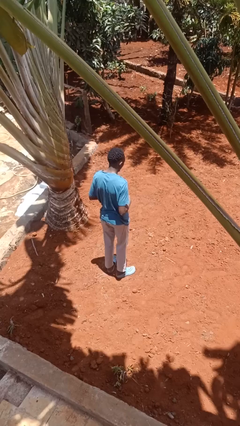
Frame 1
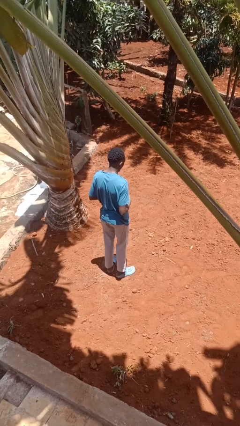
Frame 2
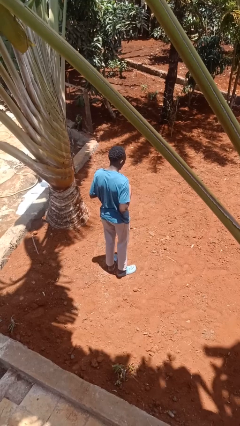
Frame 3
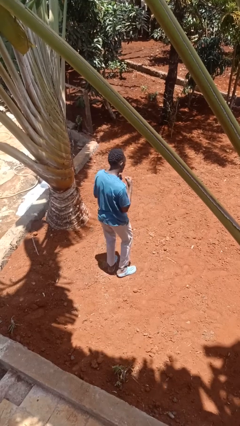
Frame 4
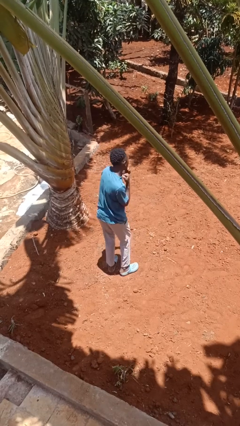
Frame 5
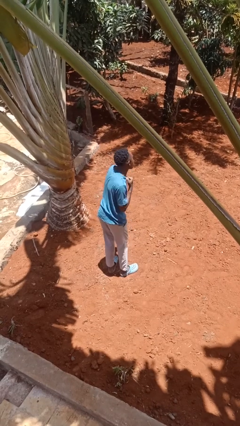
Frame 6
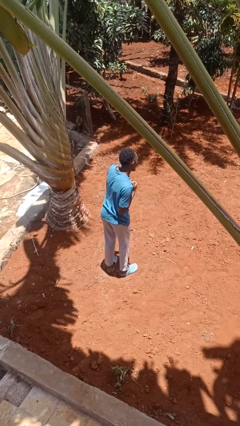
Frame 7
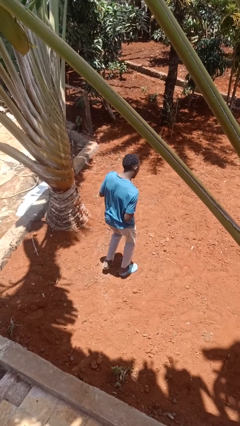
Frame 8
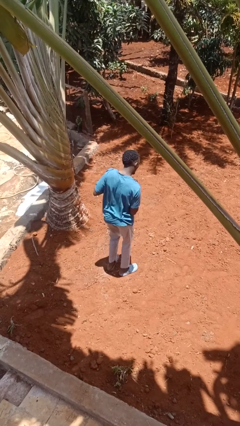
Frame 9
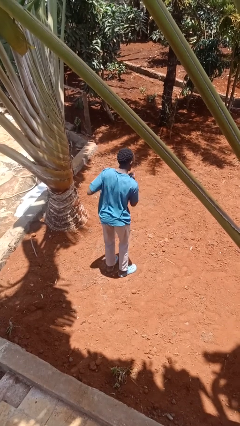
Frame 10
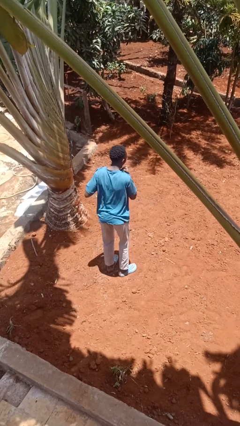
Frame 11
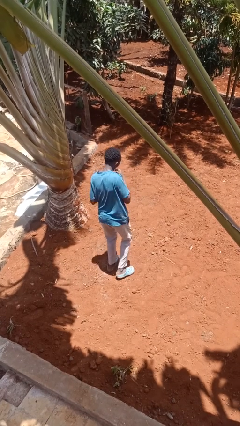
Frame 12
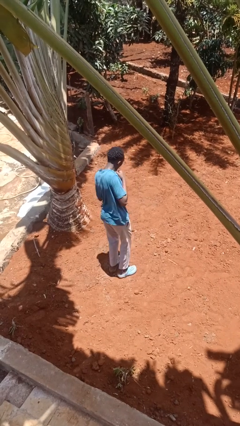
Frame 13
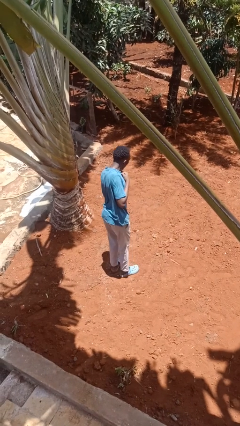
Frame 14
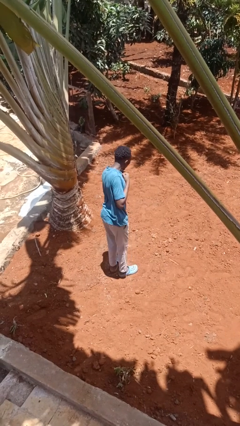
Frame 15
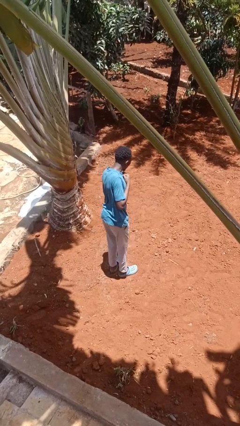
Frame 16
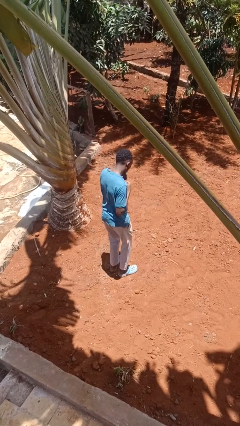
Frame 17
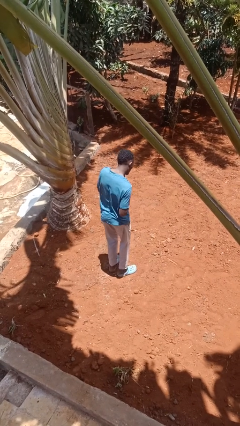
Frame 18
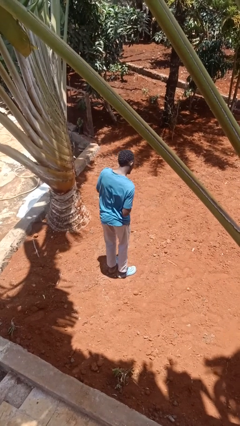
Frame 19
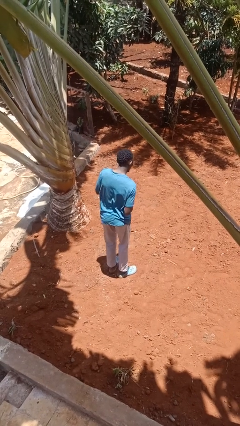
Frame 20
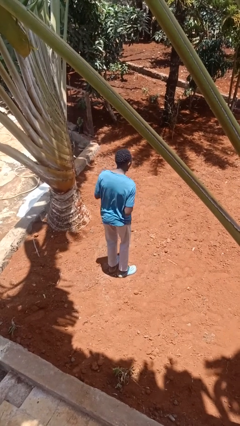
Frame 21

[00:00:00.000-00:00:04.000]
person dances in place

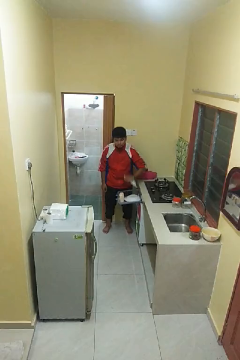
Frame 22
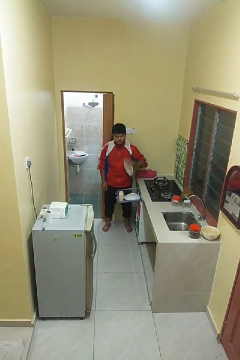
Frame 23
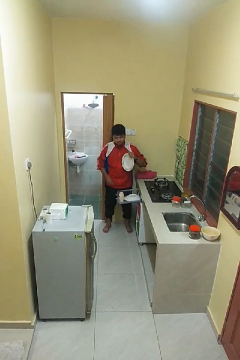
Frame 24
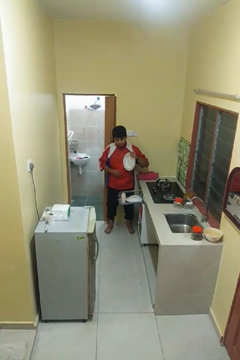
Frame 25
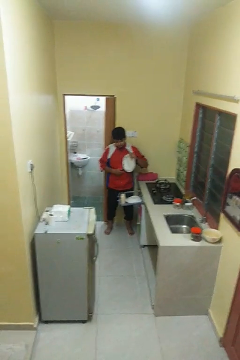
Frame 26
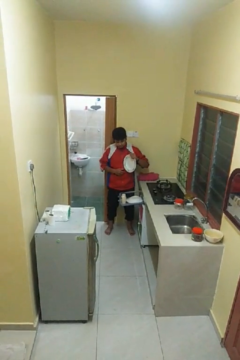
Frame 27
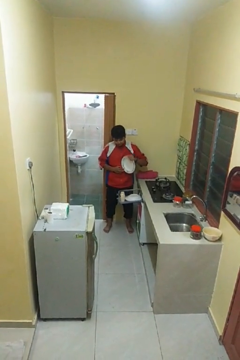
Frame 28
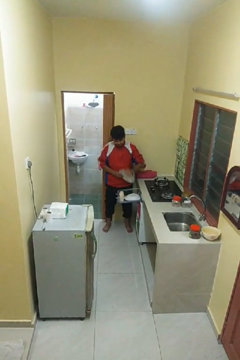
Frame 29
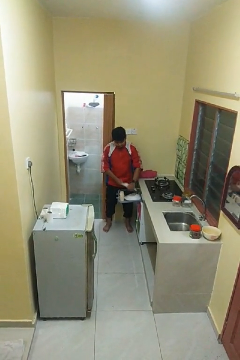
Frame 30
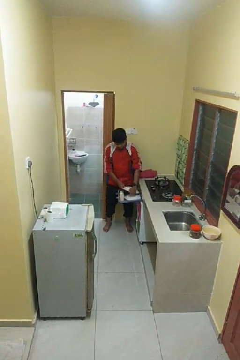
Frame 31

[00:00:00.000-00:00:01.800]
person puts object into kitchen drawer

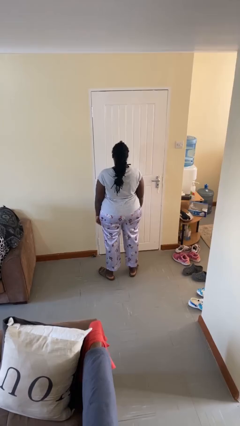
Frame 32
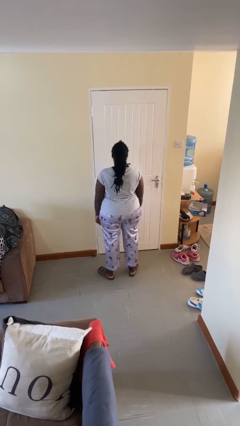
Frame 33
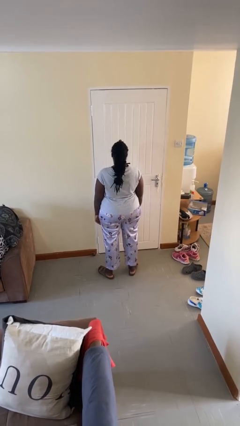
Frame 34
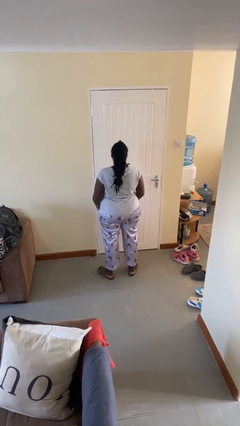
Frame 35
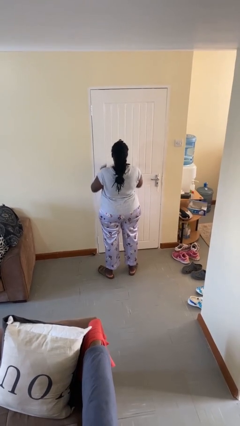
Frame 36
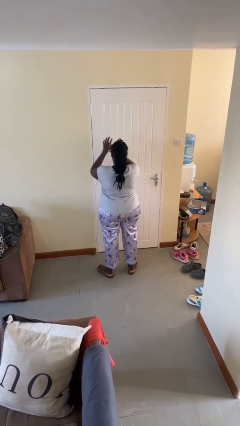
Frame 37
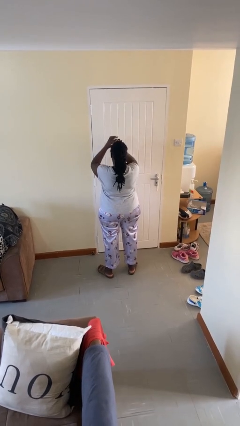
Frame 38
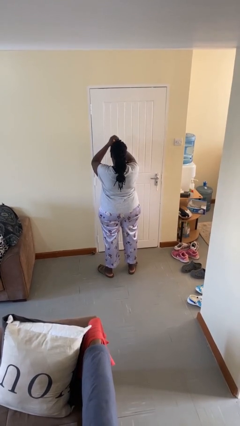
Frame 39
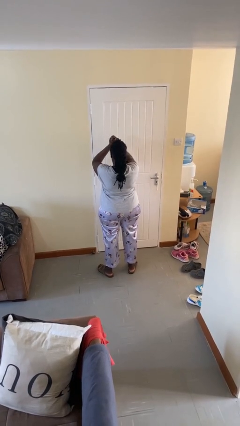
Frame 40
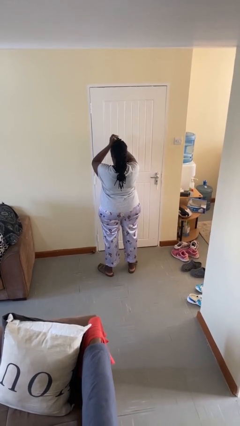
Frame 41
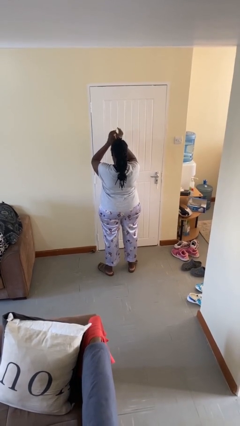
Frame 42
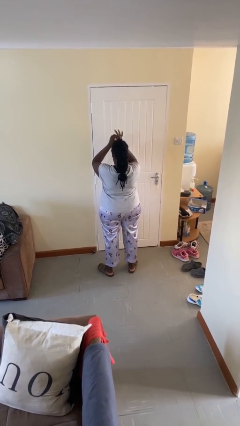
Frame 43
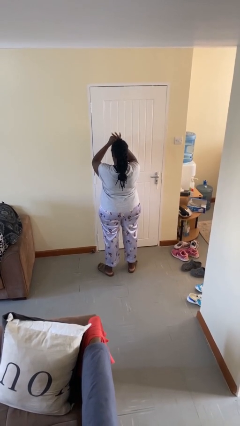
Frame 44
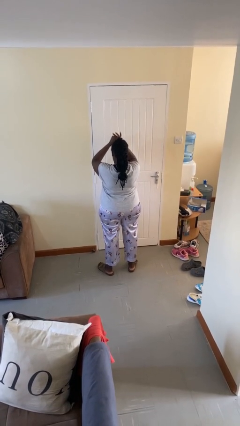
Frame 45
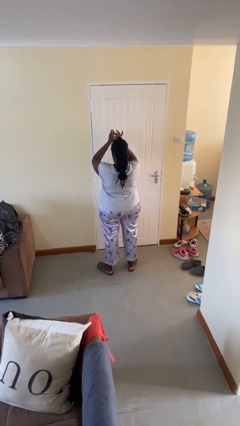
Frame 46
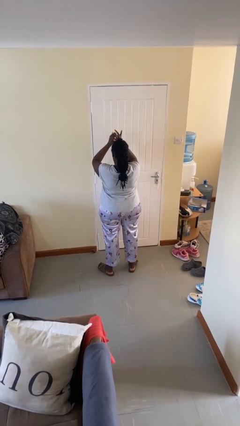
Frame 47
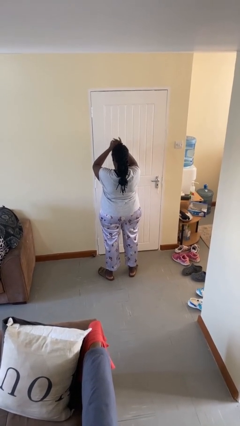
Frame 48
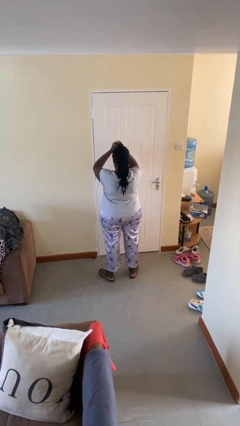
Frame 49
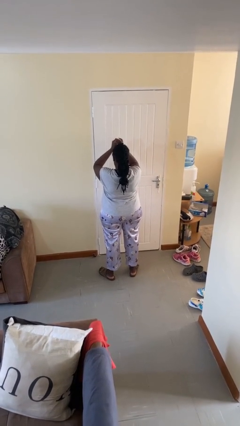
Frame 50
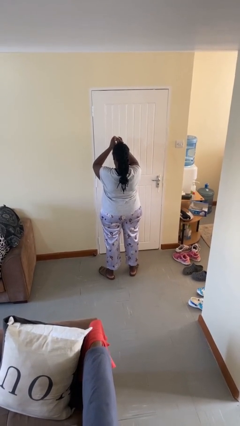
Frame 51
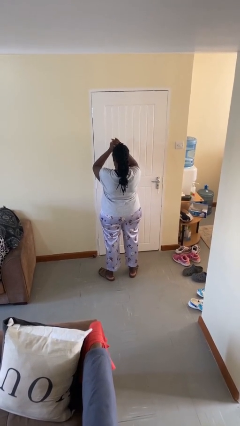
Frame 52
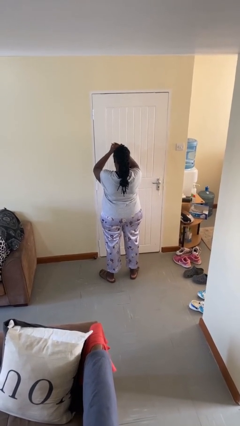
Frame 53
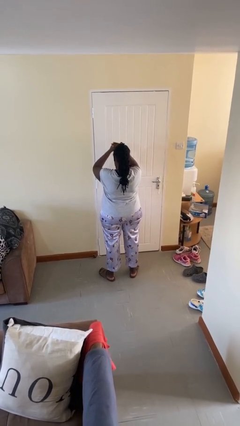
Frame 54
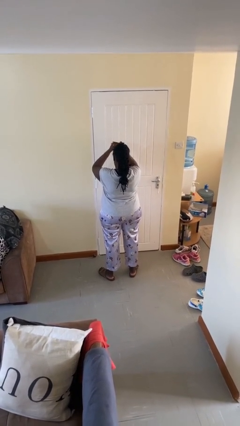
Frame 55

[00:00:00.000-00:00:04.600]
person cracks knuckles

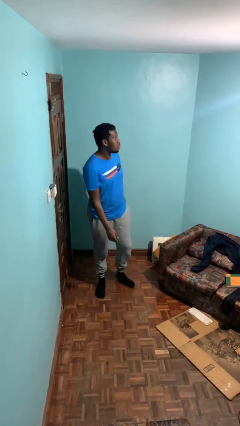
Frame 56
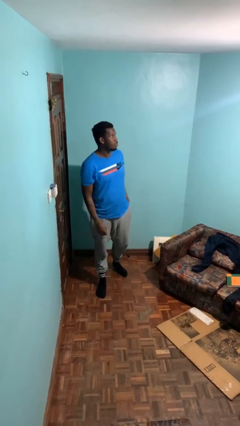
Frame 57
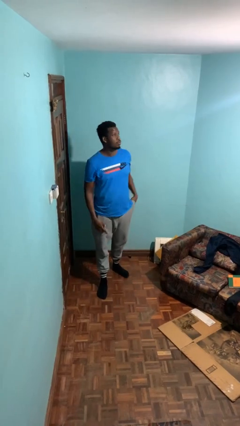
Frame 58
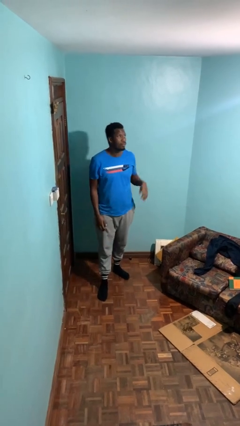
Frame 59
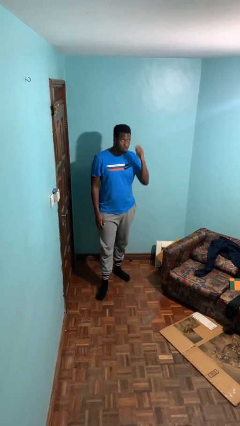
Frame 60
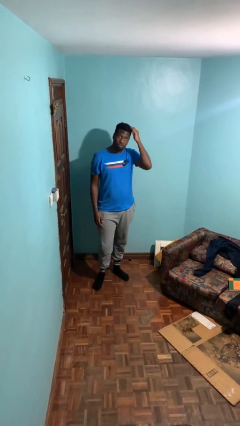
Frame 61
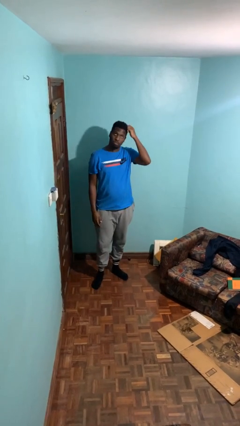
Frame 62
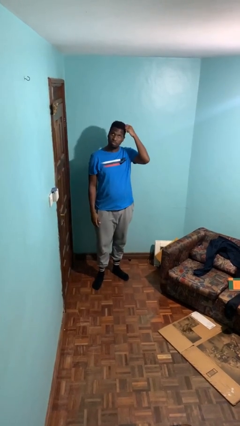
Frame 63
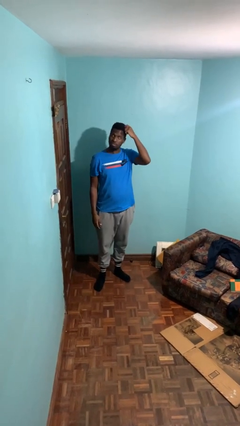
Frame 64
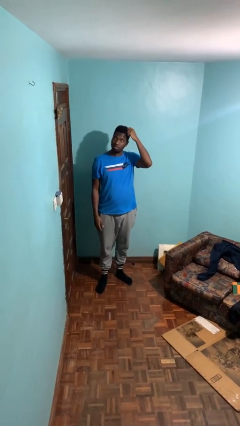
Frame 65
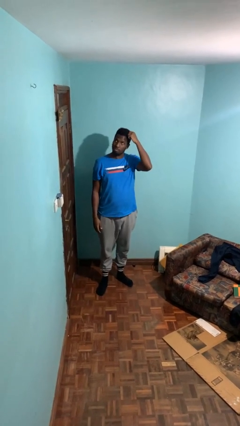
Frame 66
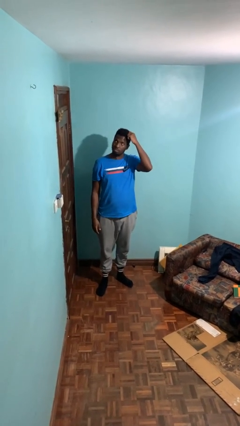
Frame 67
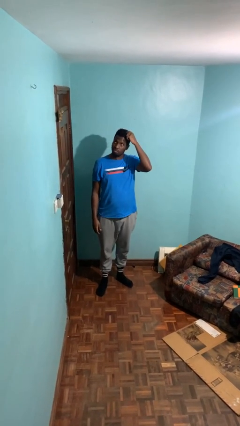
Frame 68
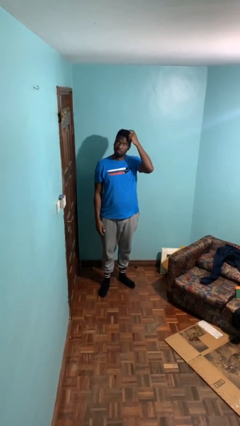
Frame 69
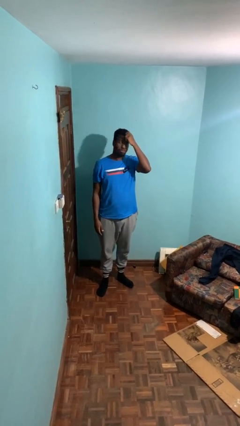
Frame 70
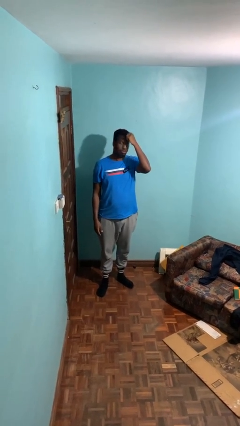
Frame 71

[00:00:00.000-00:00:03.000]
person scratches face

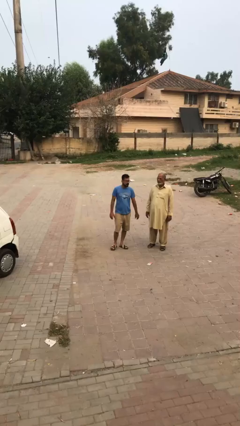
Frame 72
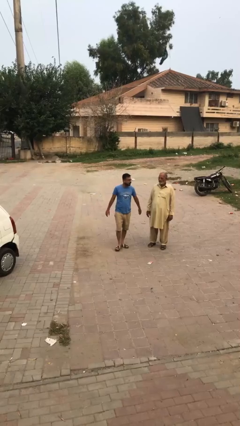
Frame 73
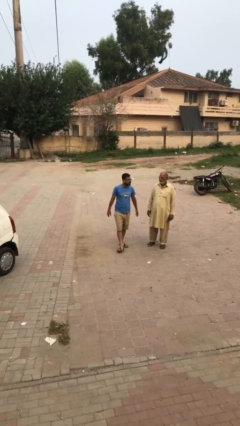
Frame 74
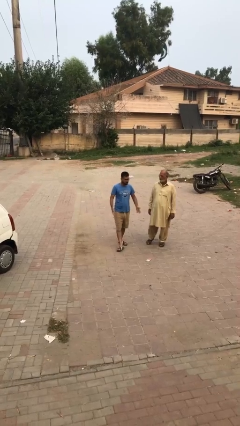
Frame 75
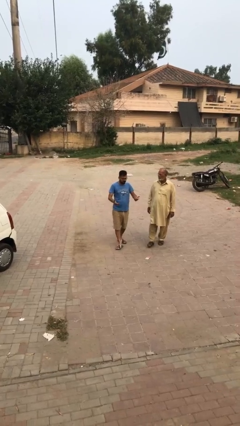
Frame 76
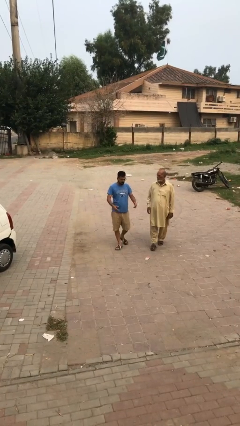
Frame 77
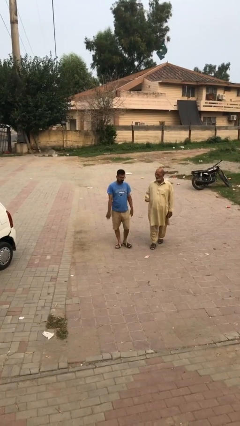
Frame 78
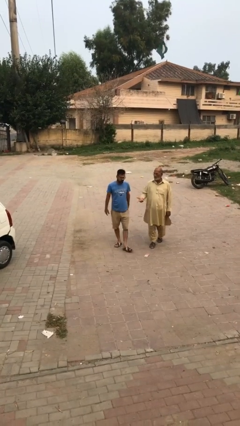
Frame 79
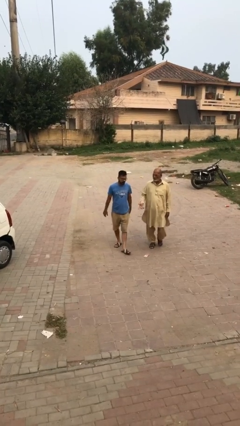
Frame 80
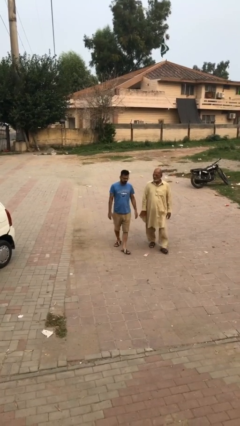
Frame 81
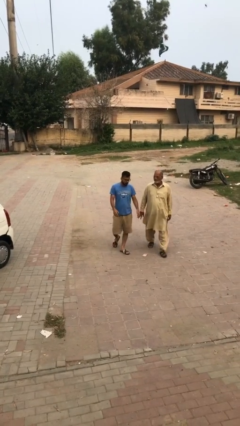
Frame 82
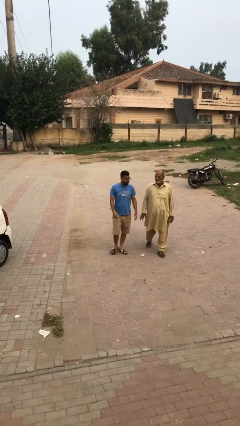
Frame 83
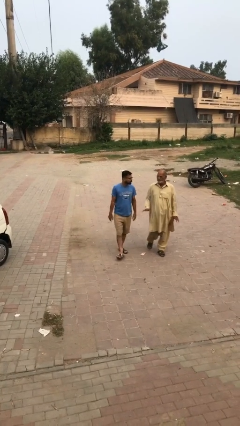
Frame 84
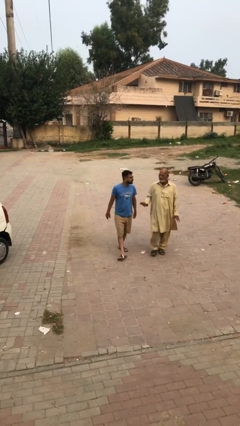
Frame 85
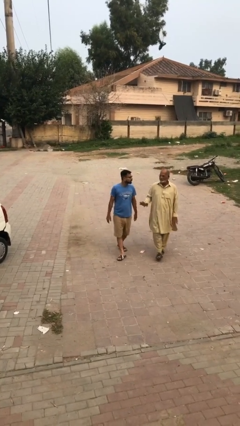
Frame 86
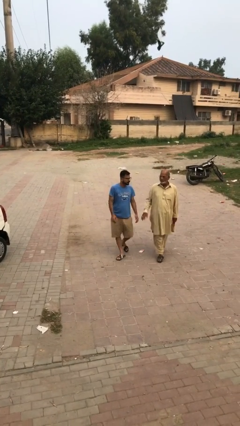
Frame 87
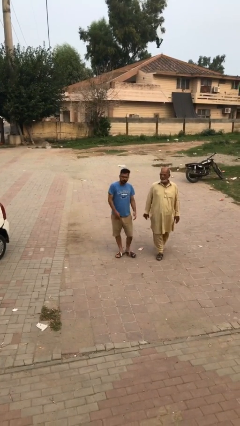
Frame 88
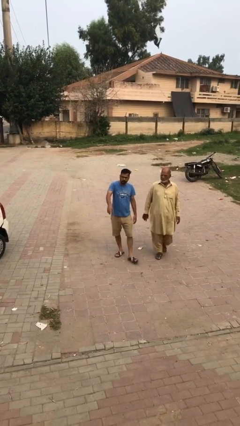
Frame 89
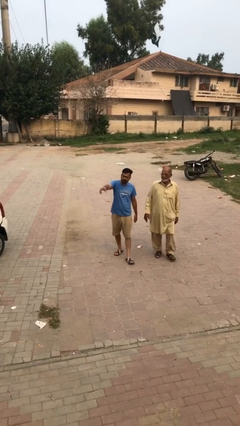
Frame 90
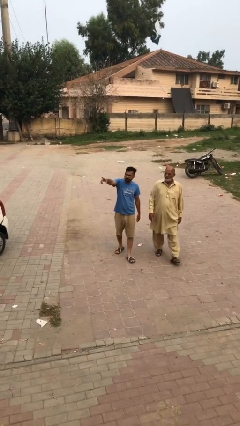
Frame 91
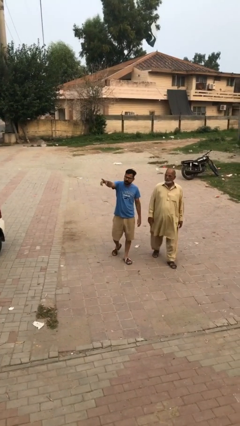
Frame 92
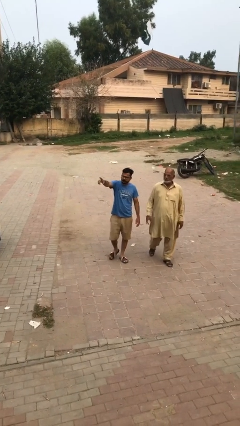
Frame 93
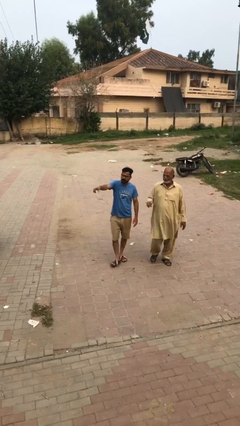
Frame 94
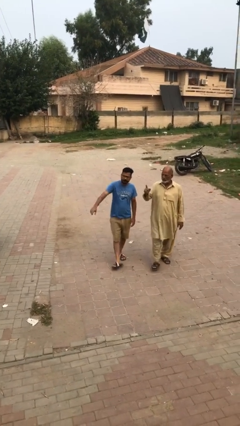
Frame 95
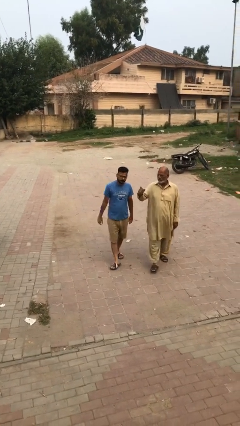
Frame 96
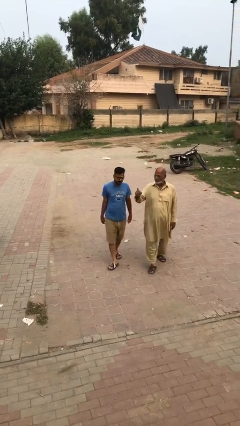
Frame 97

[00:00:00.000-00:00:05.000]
person talks to person
